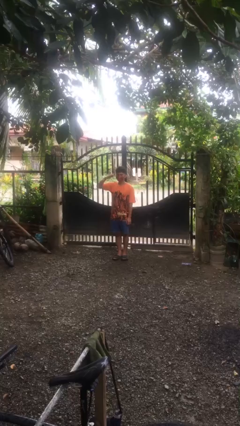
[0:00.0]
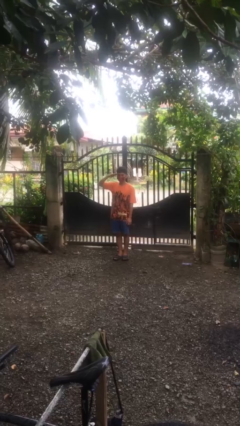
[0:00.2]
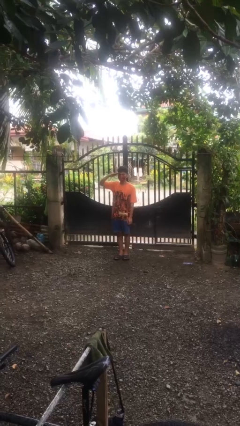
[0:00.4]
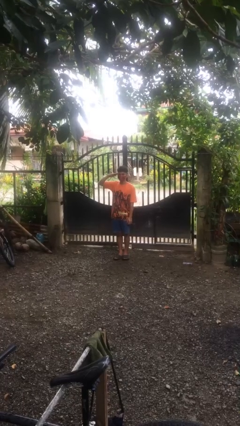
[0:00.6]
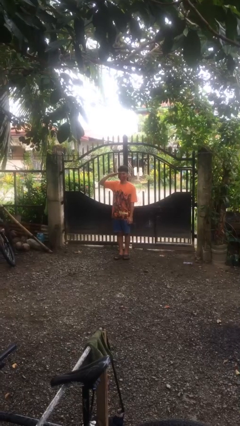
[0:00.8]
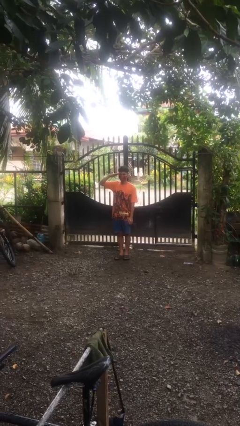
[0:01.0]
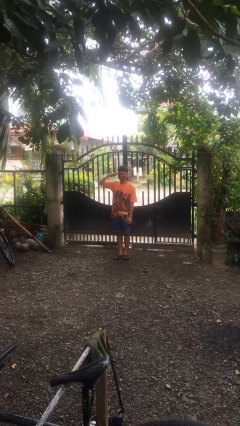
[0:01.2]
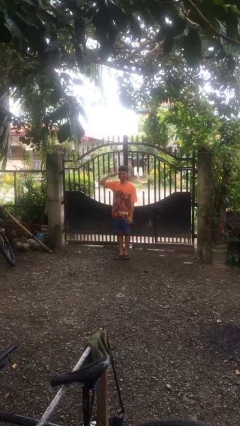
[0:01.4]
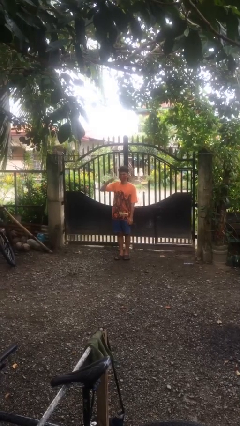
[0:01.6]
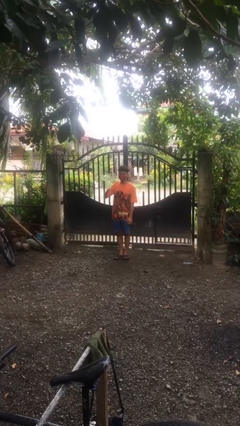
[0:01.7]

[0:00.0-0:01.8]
person salutes

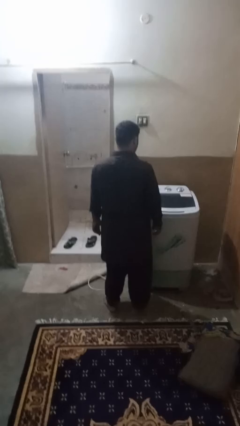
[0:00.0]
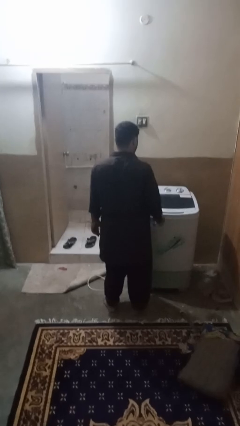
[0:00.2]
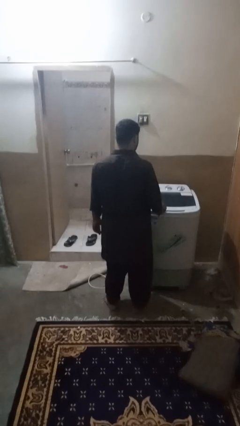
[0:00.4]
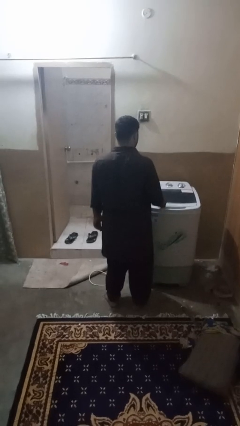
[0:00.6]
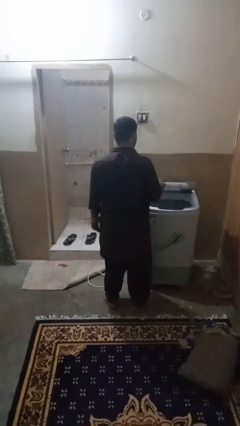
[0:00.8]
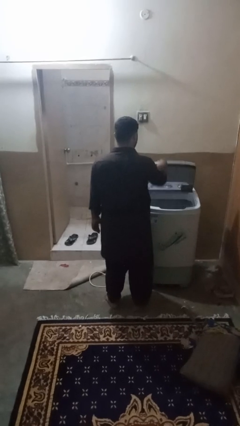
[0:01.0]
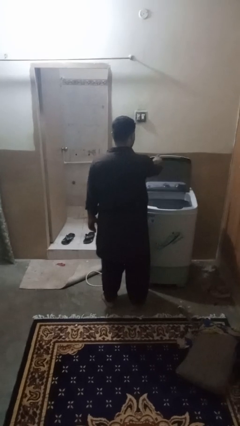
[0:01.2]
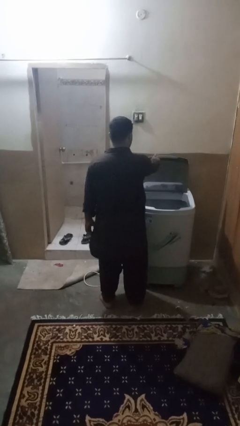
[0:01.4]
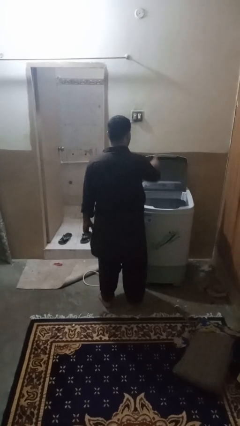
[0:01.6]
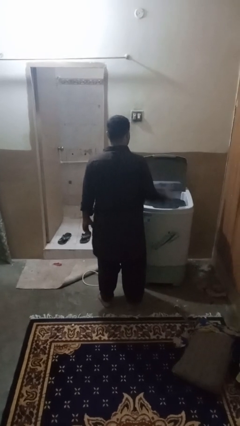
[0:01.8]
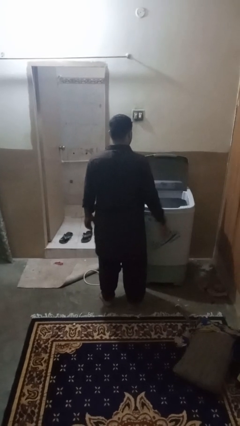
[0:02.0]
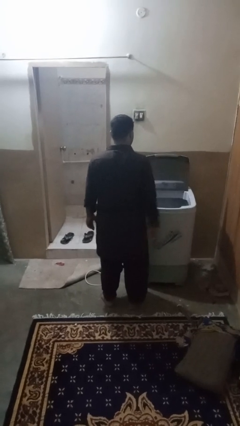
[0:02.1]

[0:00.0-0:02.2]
person opens clothes washer

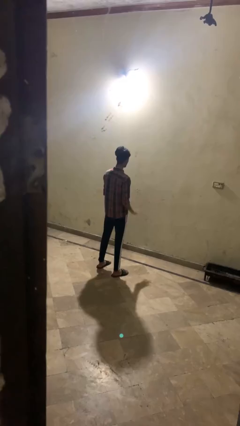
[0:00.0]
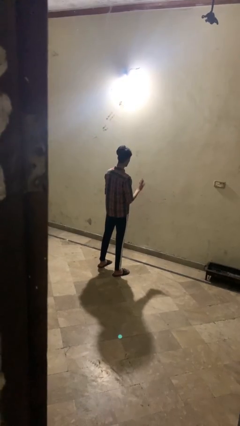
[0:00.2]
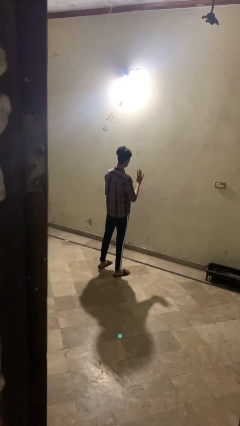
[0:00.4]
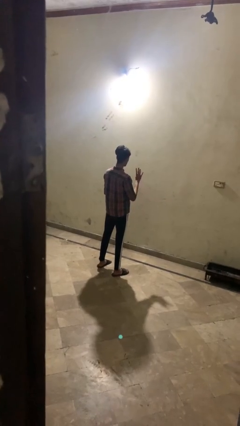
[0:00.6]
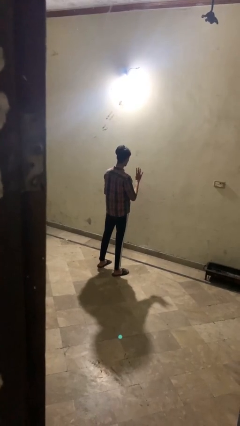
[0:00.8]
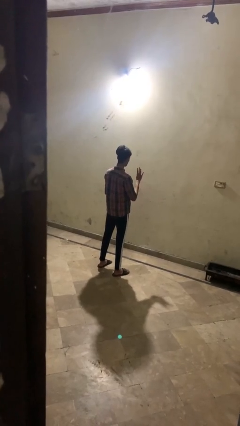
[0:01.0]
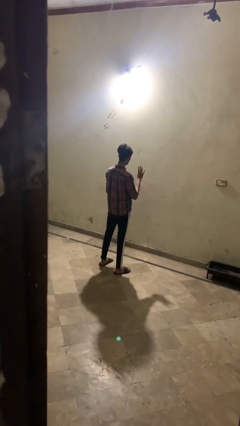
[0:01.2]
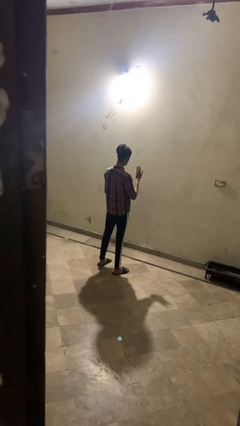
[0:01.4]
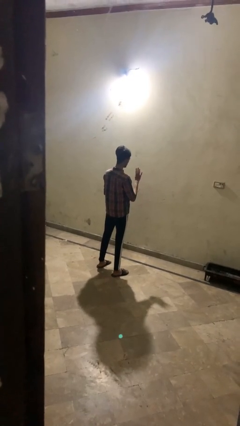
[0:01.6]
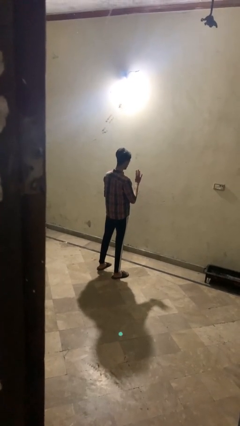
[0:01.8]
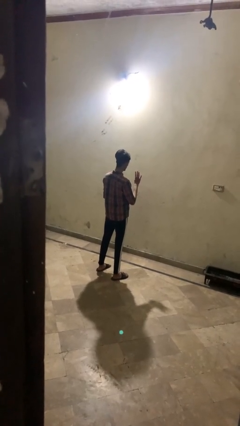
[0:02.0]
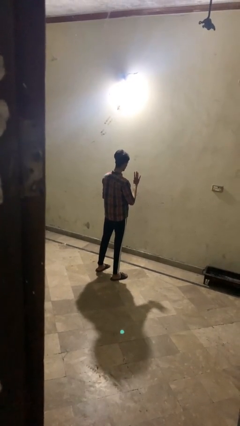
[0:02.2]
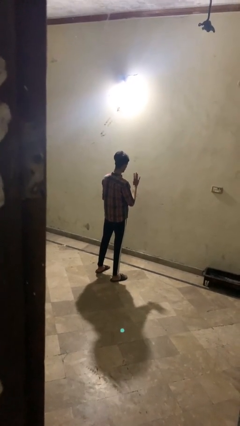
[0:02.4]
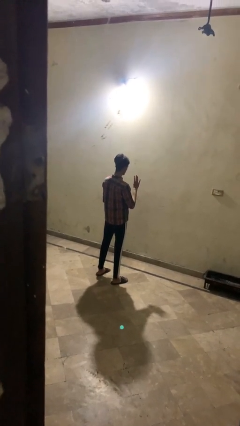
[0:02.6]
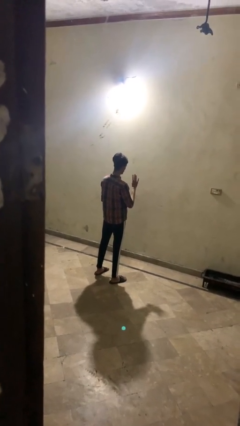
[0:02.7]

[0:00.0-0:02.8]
person gestures number four

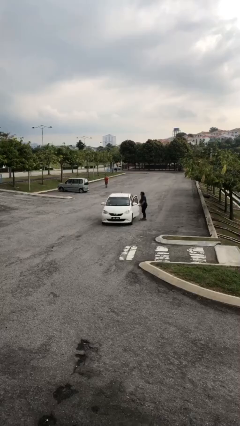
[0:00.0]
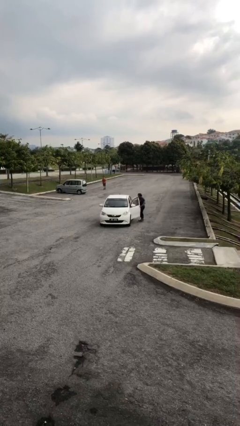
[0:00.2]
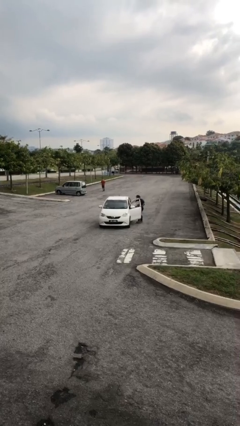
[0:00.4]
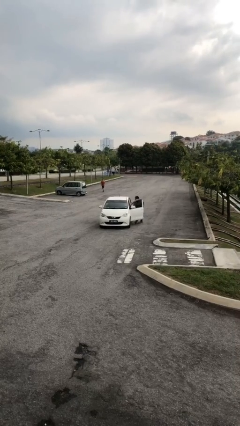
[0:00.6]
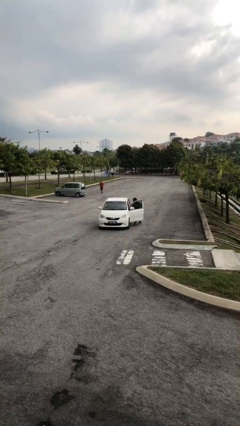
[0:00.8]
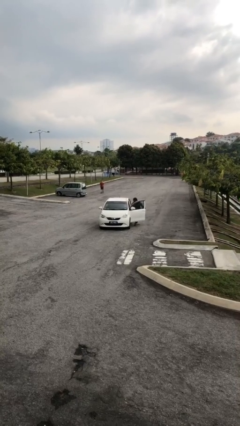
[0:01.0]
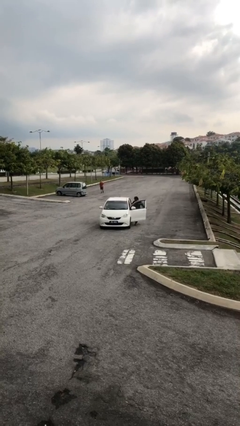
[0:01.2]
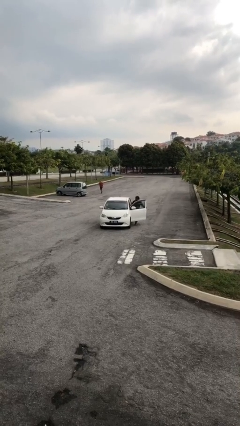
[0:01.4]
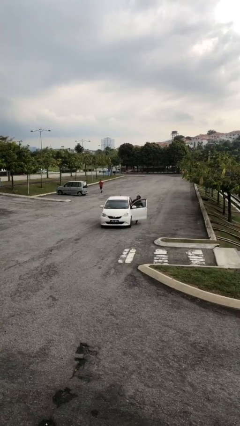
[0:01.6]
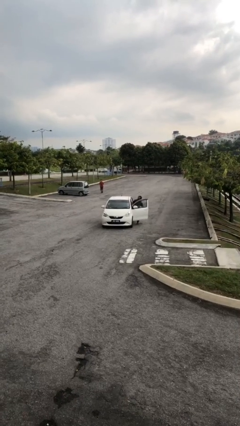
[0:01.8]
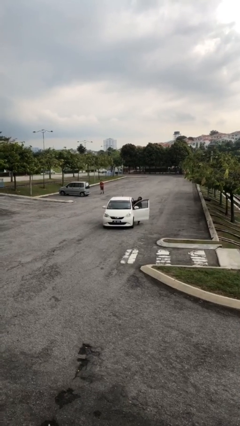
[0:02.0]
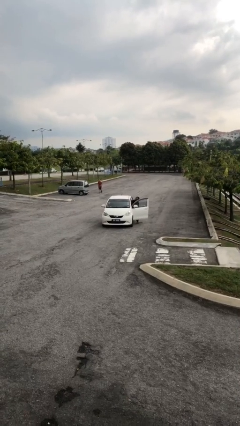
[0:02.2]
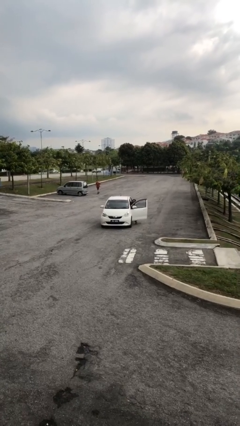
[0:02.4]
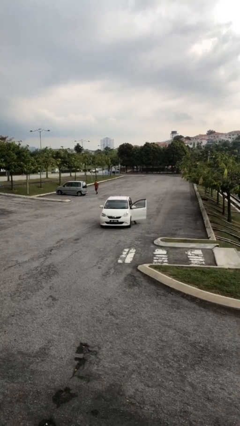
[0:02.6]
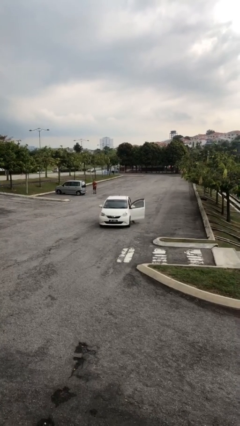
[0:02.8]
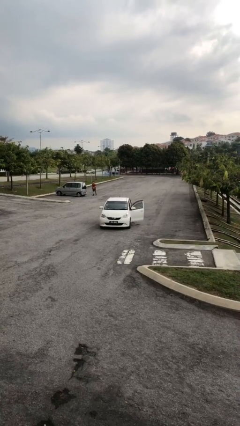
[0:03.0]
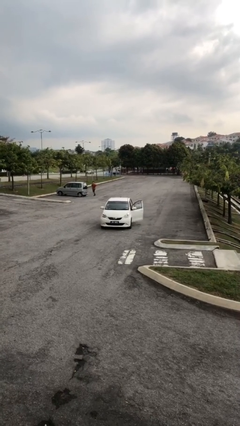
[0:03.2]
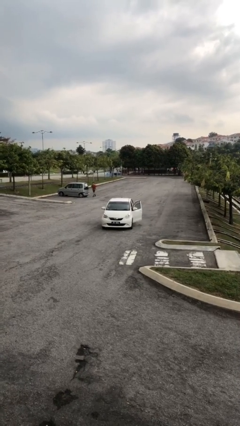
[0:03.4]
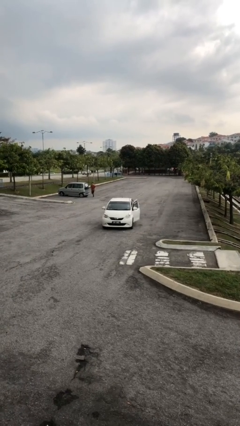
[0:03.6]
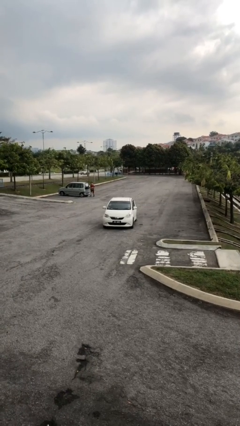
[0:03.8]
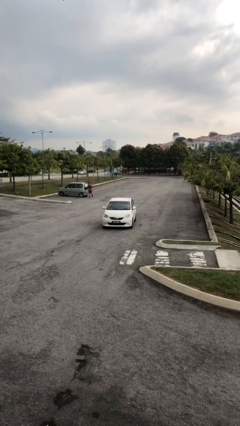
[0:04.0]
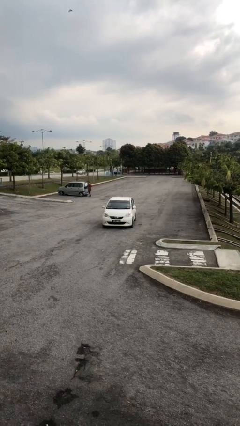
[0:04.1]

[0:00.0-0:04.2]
car picks up person

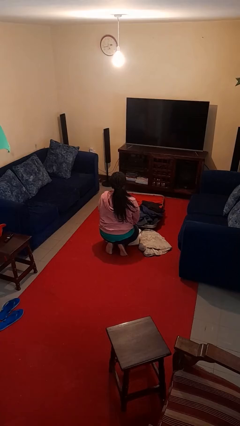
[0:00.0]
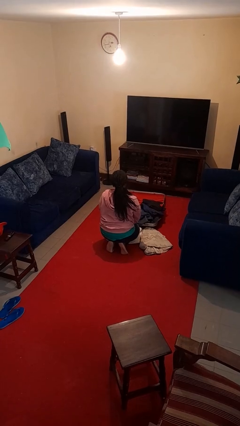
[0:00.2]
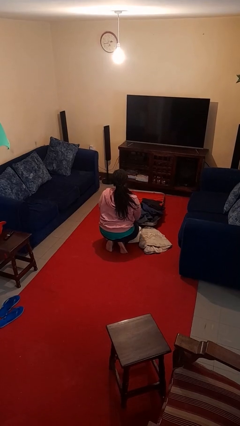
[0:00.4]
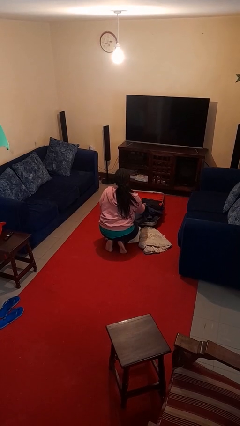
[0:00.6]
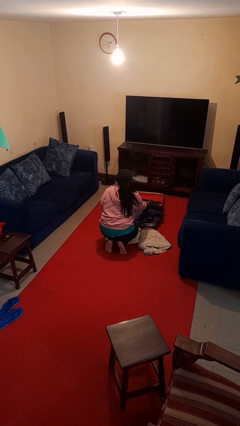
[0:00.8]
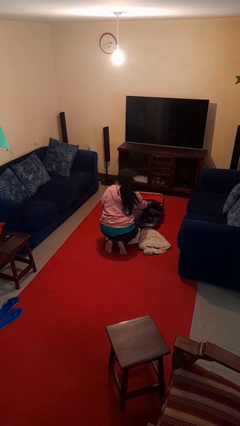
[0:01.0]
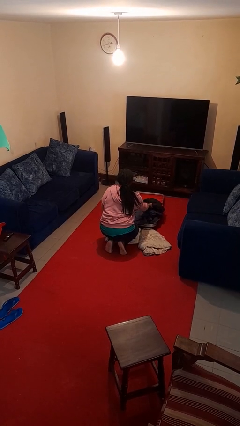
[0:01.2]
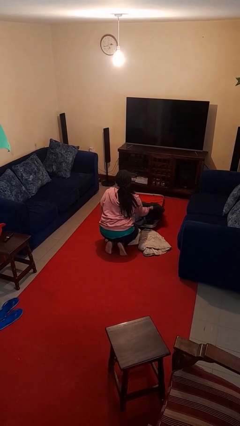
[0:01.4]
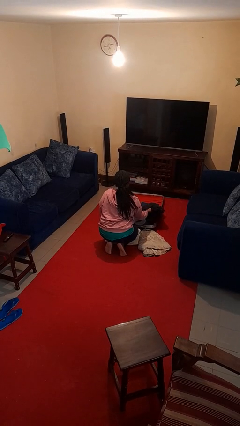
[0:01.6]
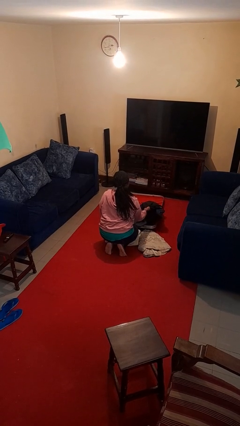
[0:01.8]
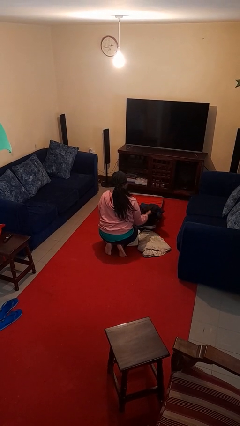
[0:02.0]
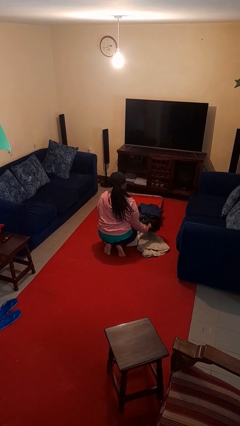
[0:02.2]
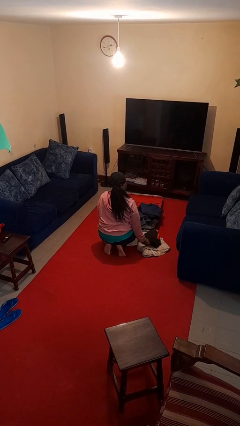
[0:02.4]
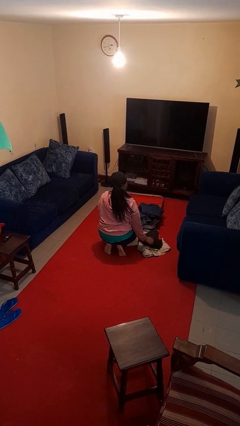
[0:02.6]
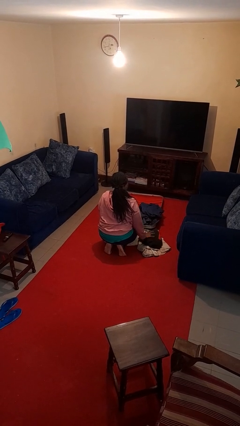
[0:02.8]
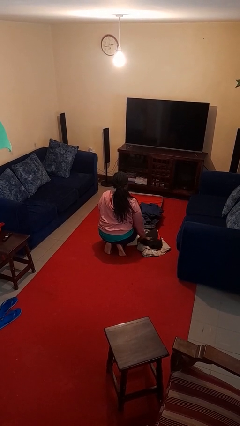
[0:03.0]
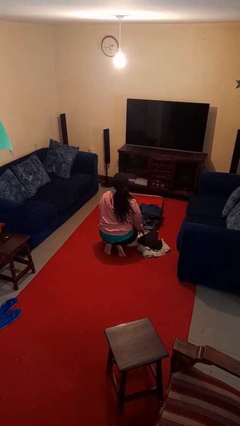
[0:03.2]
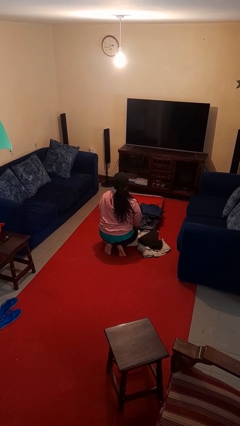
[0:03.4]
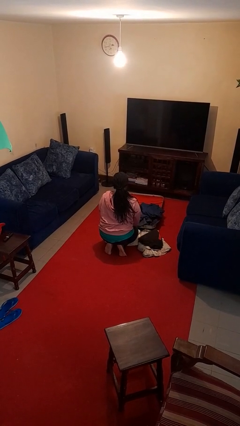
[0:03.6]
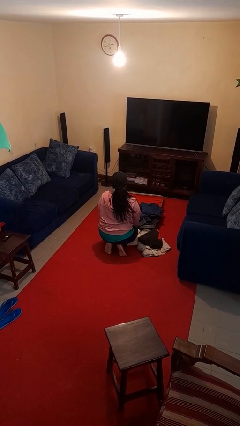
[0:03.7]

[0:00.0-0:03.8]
person unloads clothes from suitcase

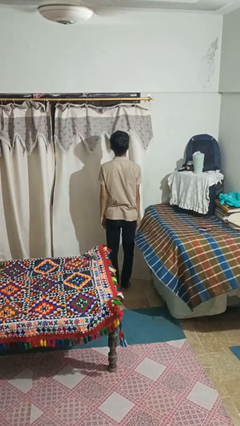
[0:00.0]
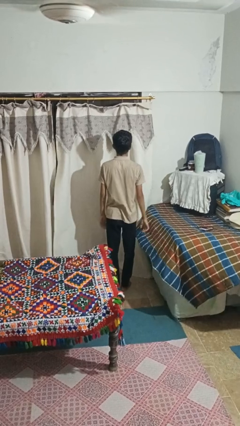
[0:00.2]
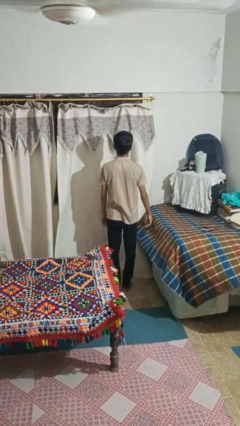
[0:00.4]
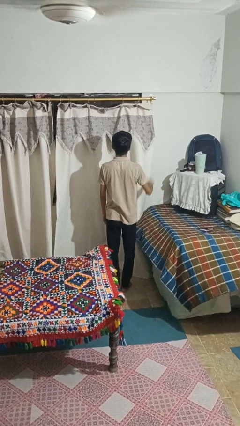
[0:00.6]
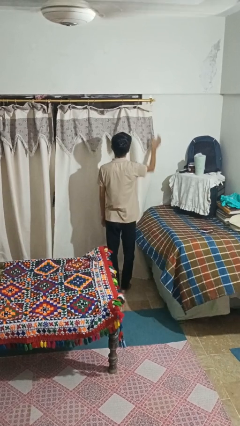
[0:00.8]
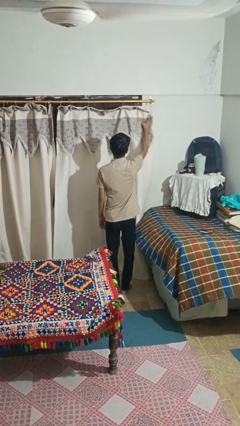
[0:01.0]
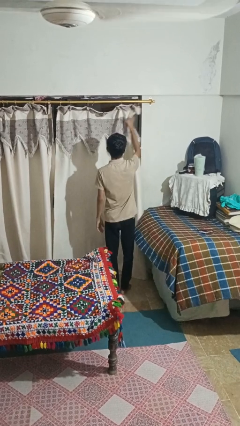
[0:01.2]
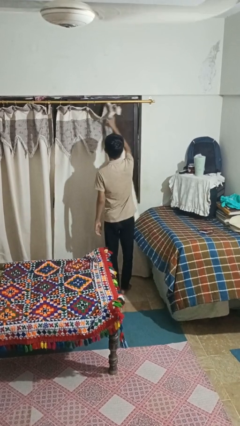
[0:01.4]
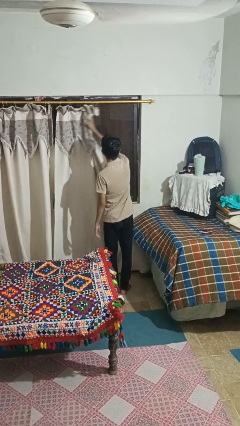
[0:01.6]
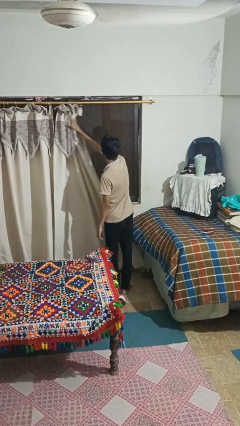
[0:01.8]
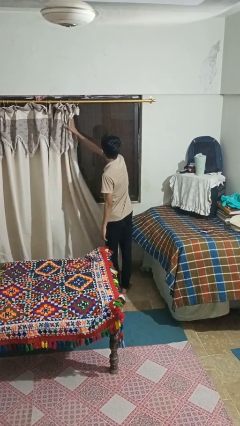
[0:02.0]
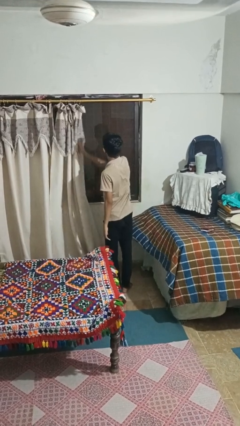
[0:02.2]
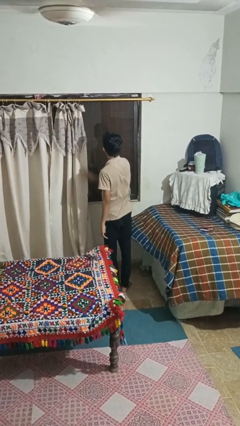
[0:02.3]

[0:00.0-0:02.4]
person opens curtains
